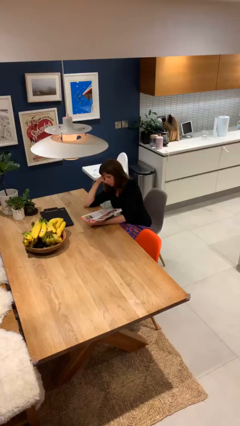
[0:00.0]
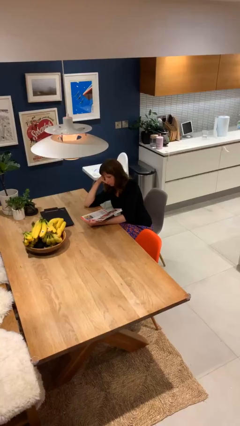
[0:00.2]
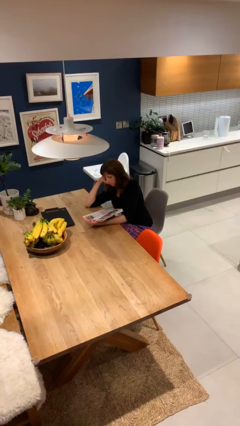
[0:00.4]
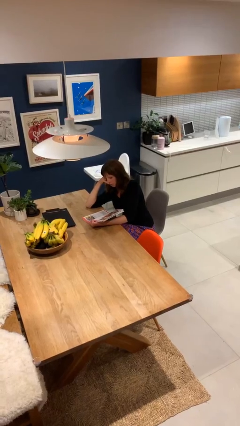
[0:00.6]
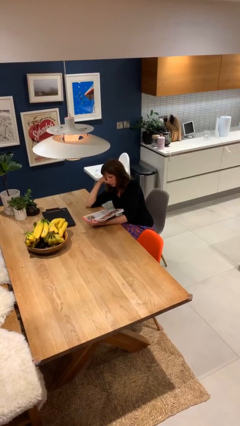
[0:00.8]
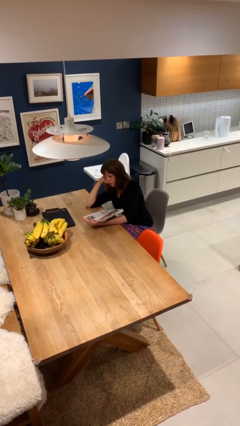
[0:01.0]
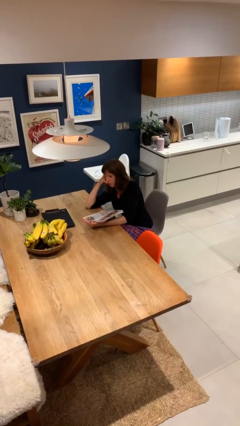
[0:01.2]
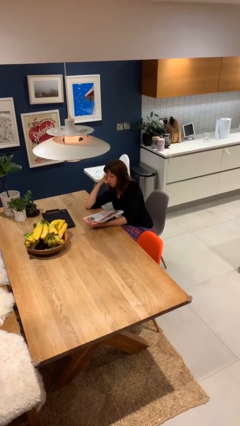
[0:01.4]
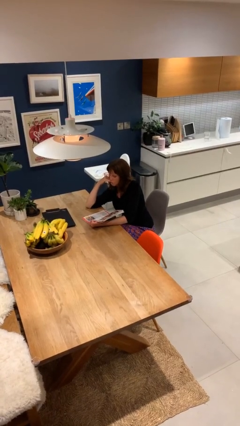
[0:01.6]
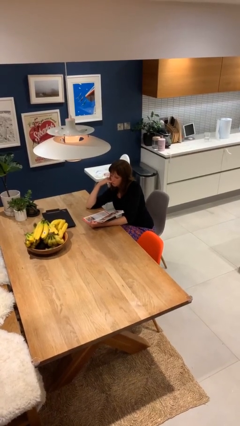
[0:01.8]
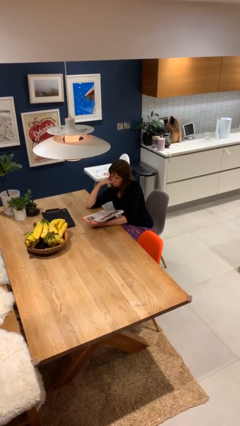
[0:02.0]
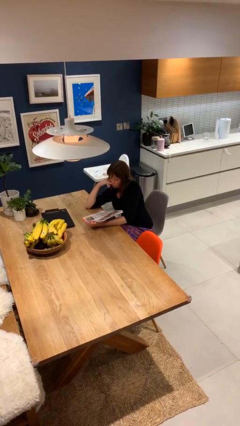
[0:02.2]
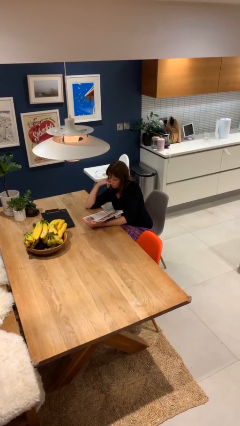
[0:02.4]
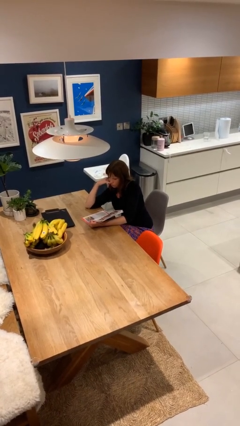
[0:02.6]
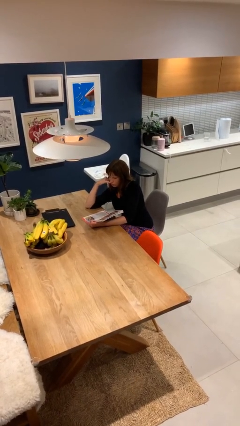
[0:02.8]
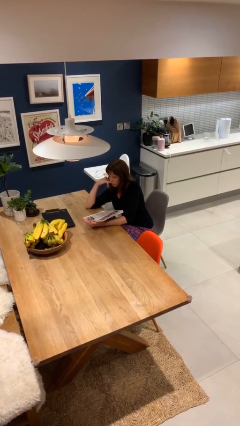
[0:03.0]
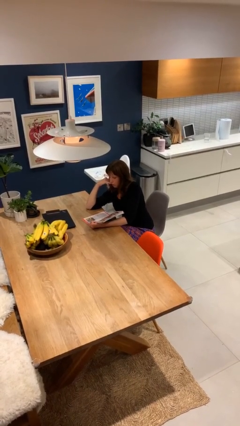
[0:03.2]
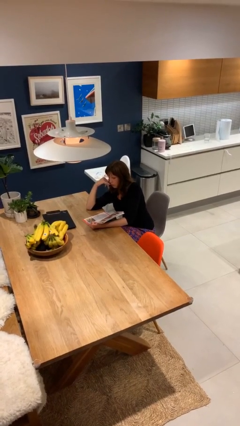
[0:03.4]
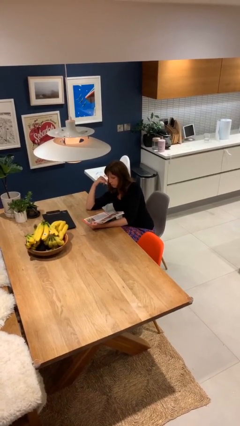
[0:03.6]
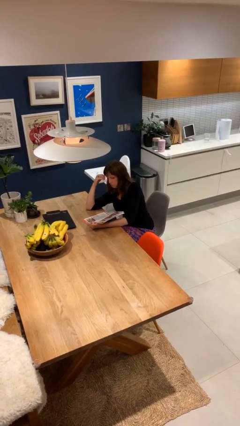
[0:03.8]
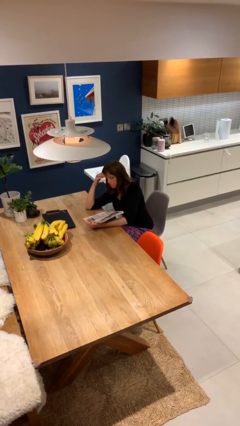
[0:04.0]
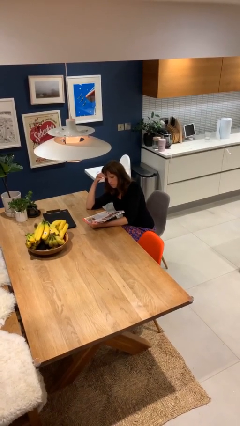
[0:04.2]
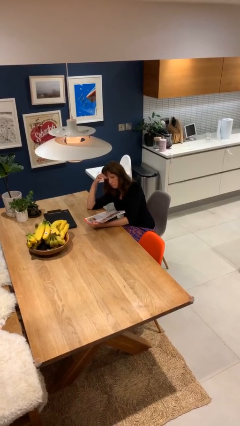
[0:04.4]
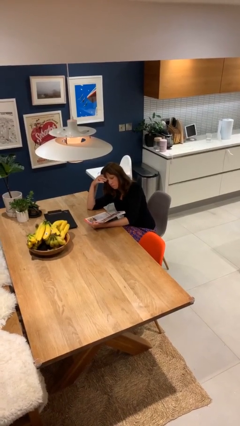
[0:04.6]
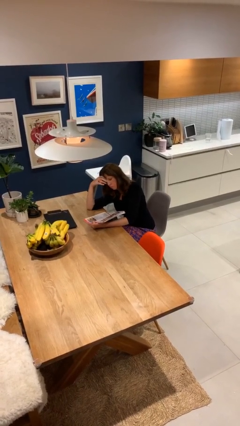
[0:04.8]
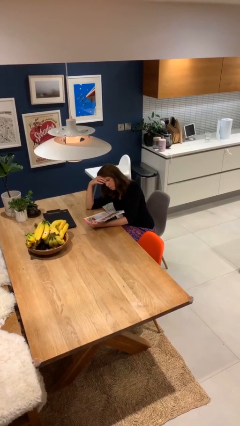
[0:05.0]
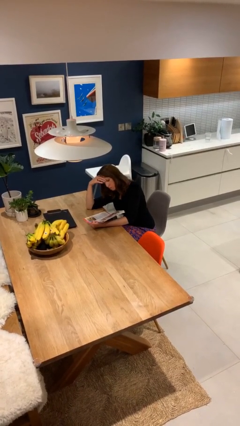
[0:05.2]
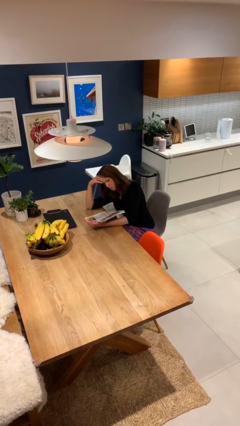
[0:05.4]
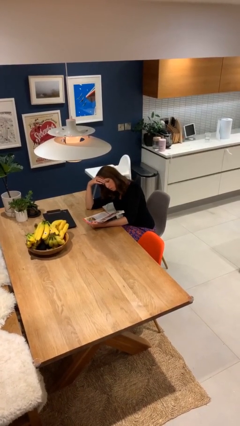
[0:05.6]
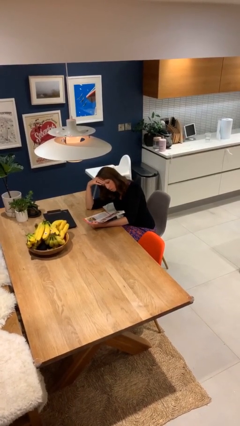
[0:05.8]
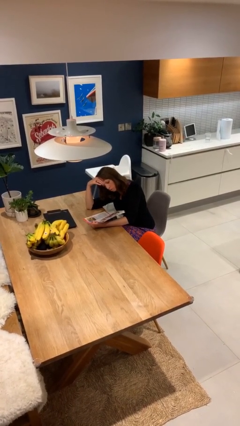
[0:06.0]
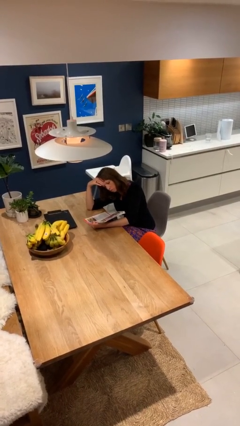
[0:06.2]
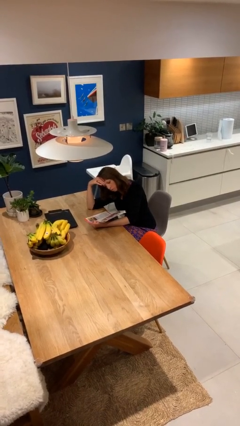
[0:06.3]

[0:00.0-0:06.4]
person reads document

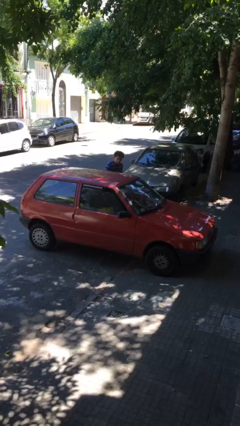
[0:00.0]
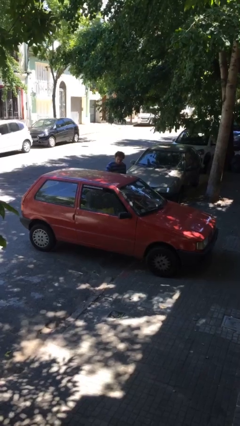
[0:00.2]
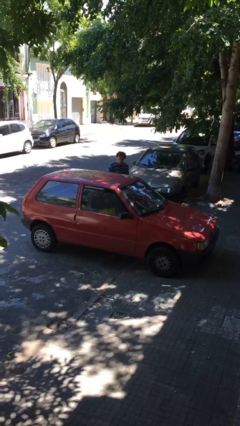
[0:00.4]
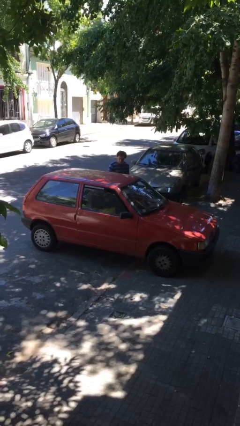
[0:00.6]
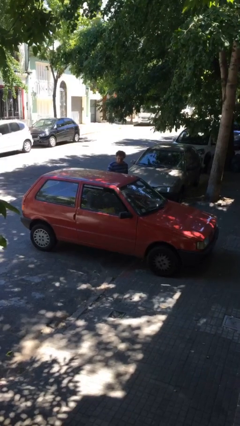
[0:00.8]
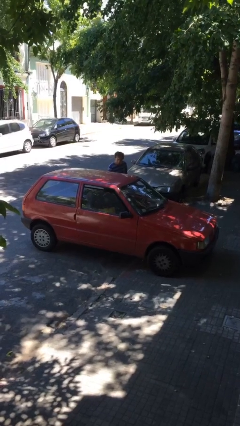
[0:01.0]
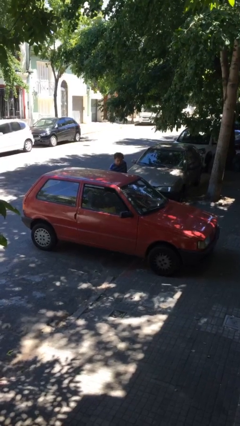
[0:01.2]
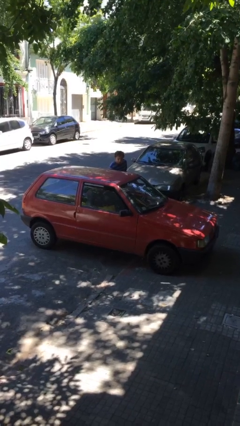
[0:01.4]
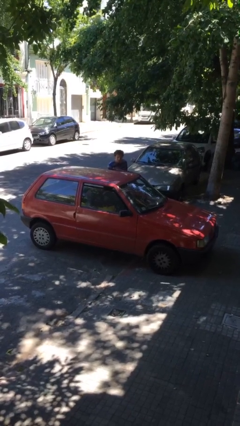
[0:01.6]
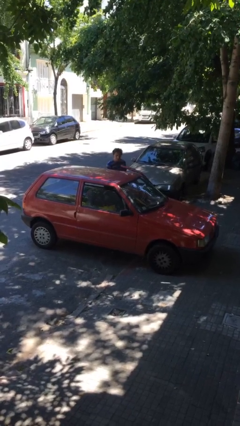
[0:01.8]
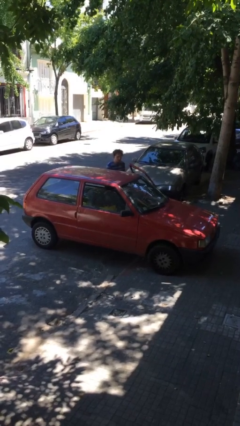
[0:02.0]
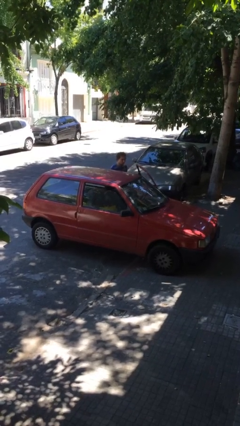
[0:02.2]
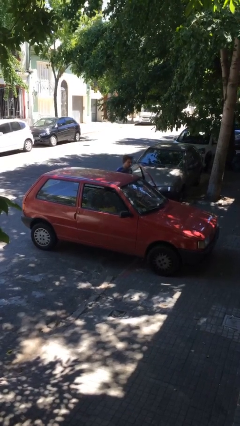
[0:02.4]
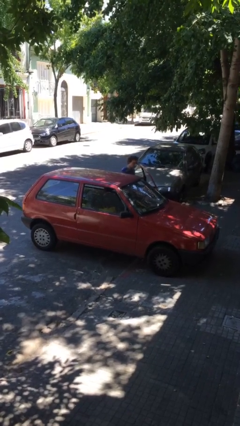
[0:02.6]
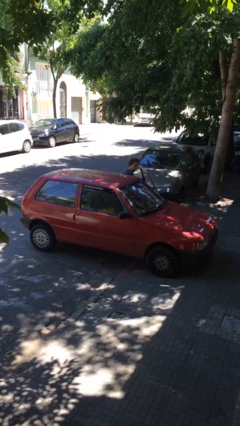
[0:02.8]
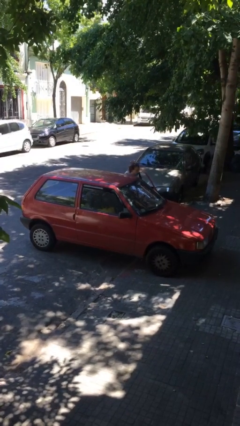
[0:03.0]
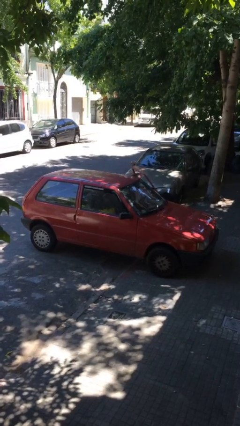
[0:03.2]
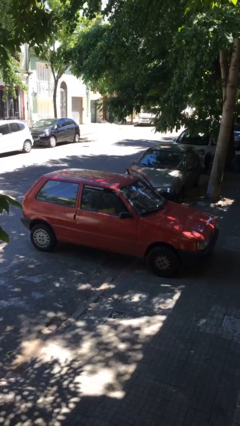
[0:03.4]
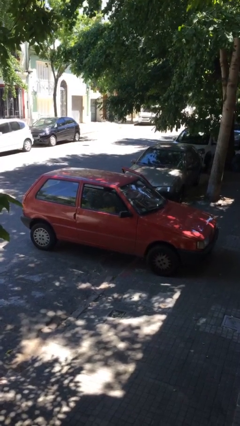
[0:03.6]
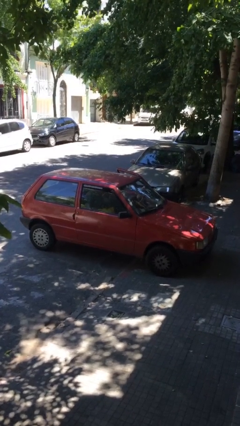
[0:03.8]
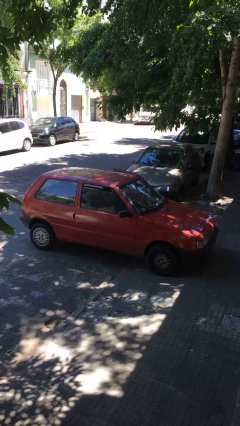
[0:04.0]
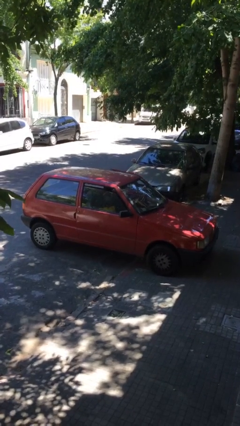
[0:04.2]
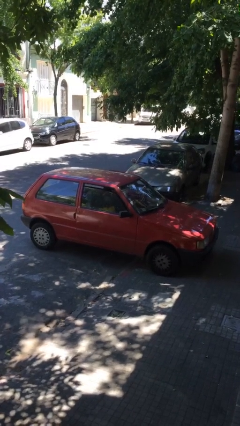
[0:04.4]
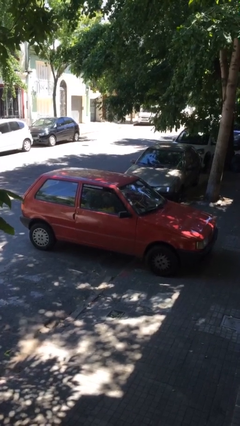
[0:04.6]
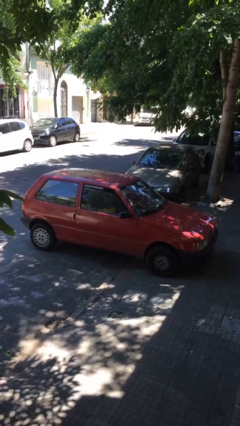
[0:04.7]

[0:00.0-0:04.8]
car picks up person

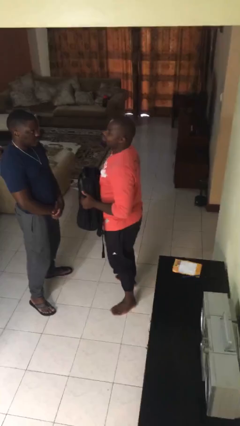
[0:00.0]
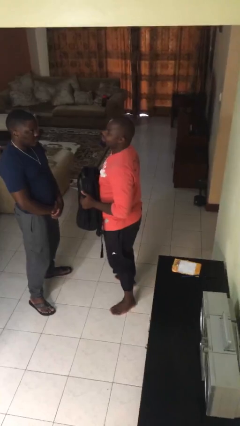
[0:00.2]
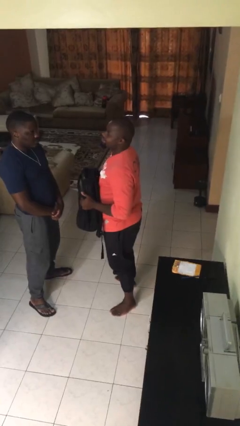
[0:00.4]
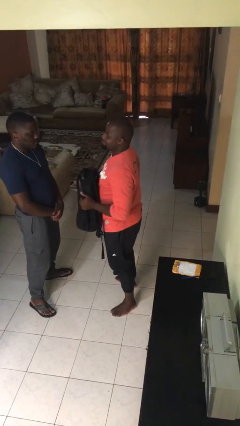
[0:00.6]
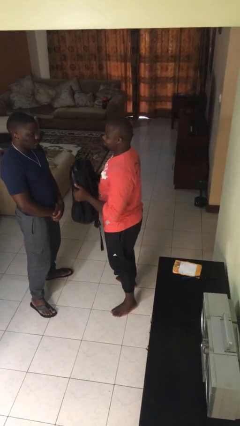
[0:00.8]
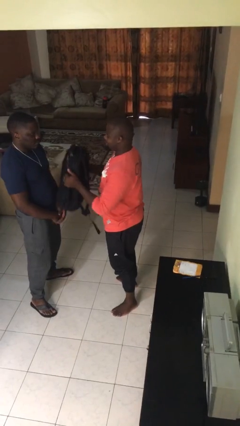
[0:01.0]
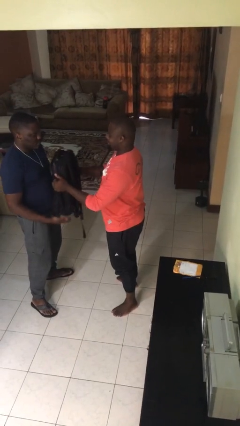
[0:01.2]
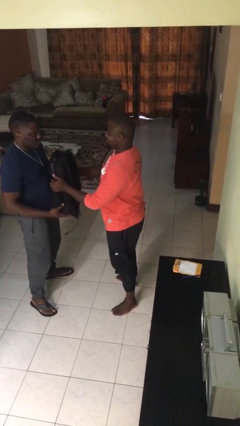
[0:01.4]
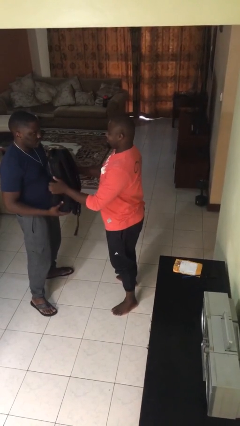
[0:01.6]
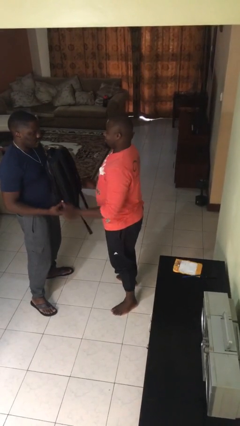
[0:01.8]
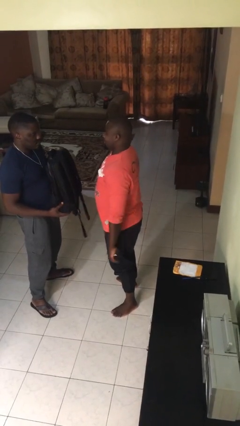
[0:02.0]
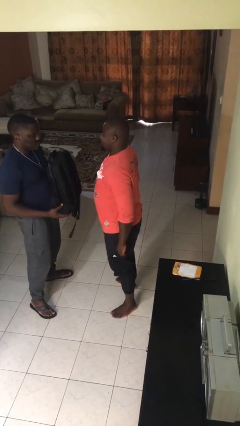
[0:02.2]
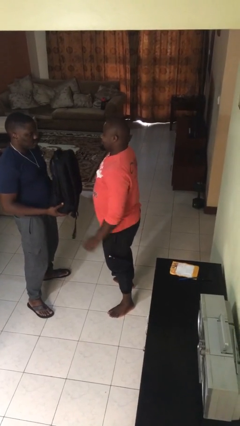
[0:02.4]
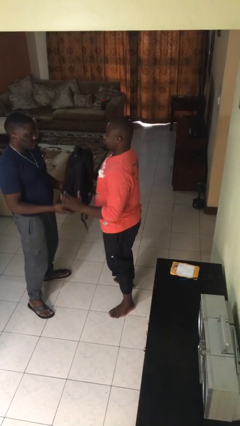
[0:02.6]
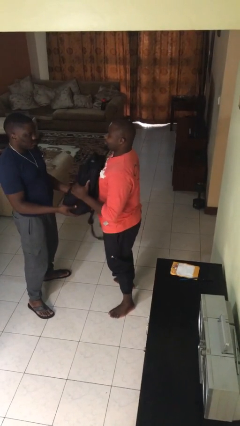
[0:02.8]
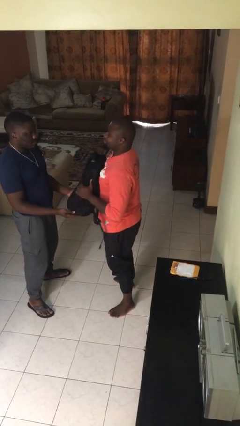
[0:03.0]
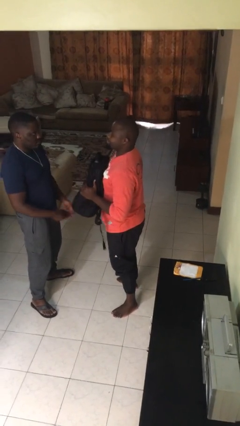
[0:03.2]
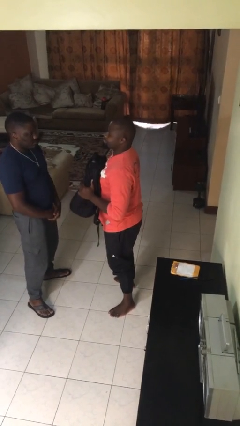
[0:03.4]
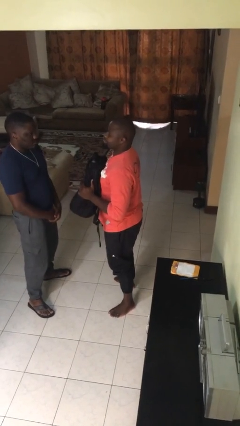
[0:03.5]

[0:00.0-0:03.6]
person transfers object to person

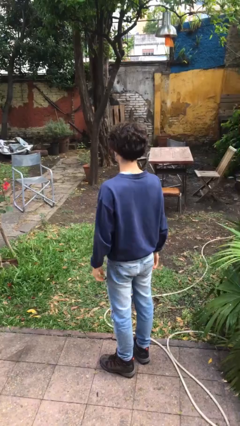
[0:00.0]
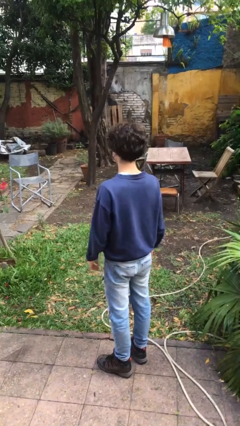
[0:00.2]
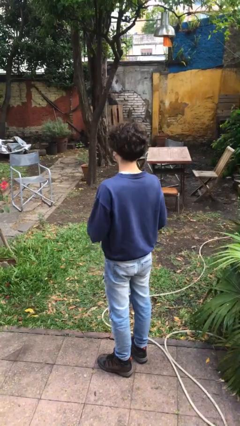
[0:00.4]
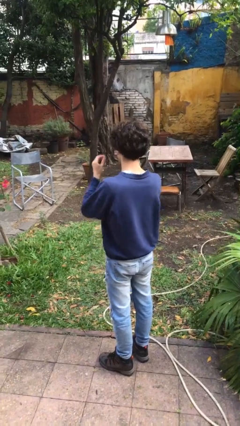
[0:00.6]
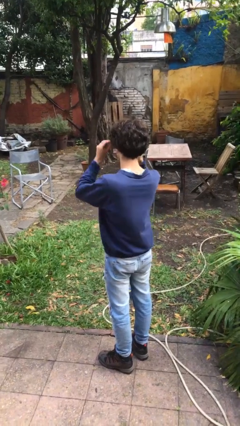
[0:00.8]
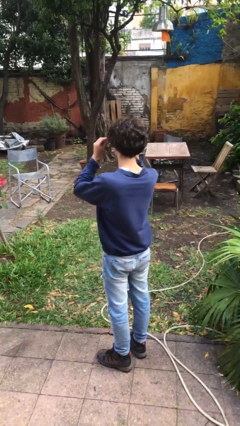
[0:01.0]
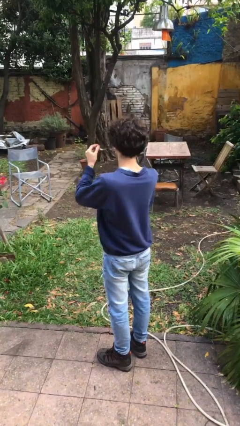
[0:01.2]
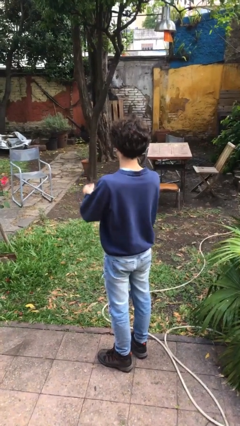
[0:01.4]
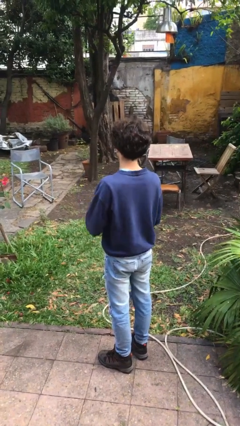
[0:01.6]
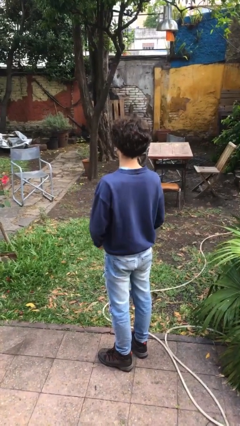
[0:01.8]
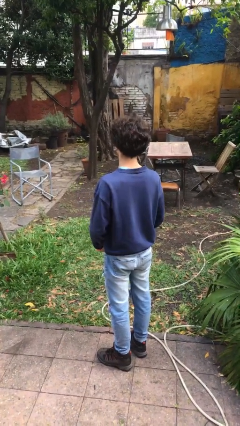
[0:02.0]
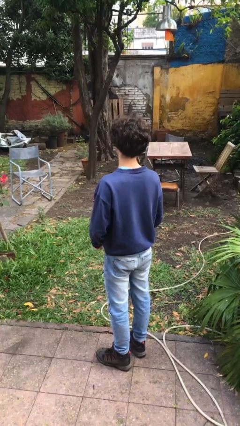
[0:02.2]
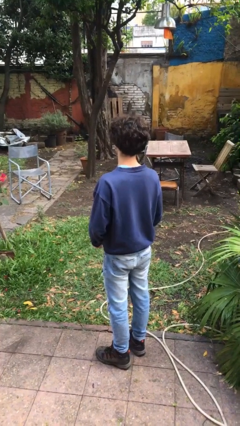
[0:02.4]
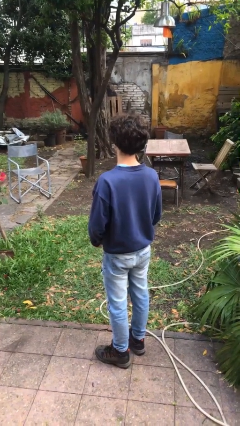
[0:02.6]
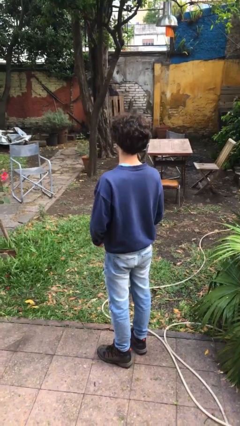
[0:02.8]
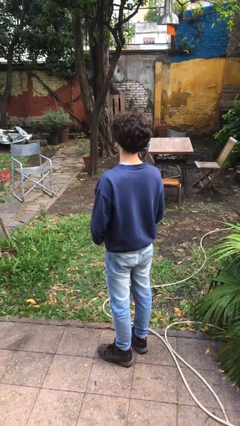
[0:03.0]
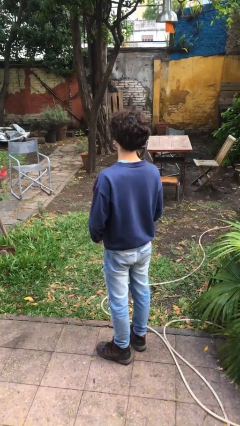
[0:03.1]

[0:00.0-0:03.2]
person takes off glasses
